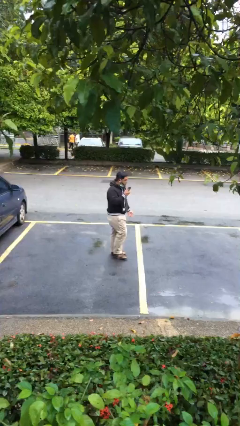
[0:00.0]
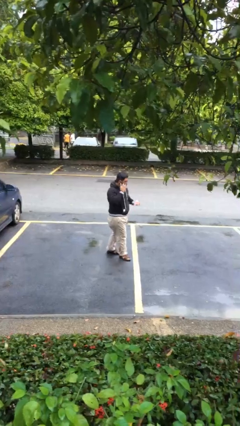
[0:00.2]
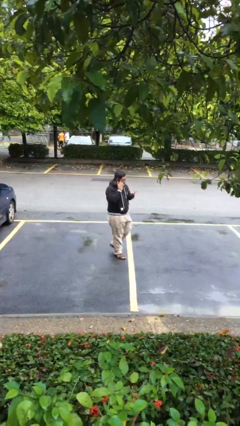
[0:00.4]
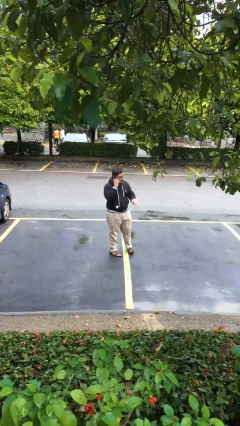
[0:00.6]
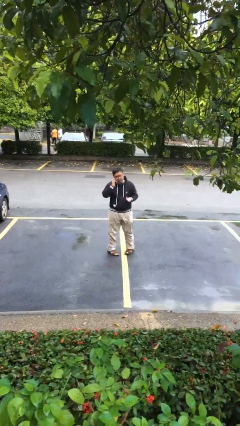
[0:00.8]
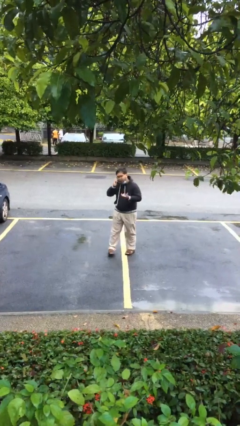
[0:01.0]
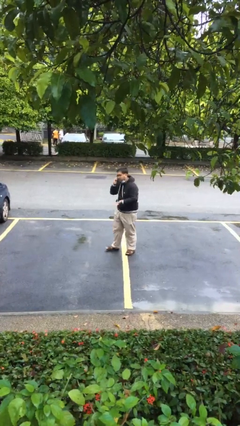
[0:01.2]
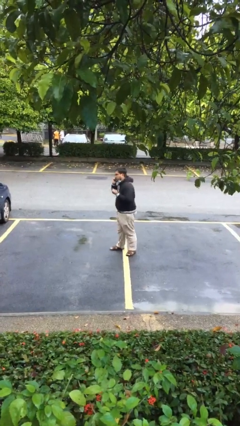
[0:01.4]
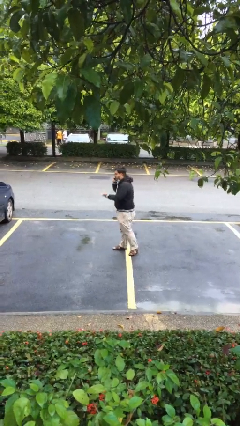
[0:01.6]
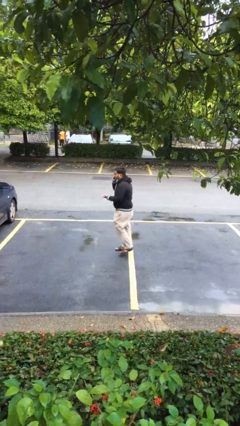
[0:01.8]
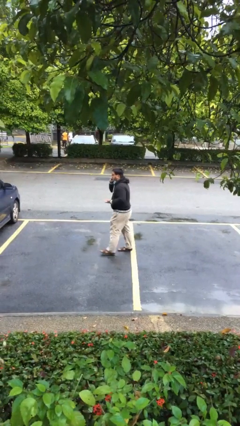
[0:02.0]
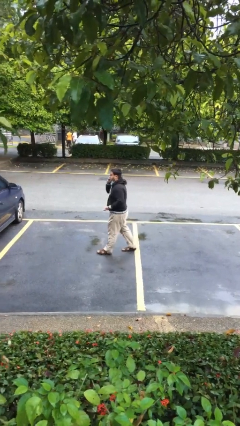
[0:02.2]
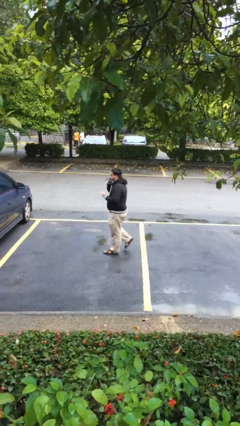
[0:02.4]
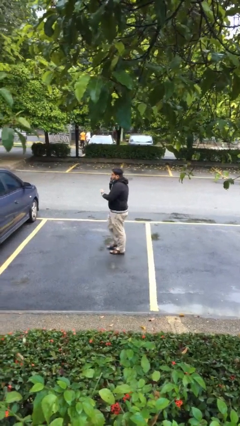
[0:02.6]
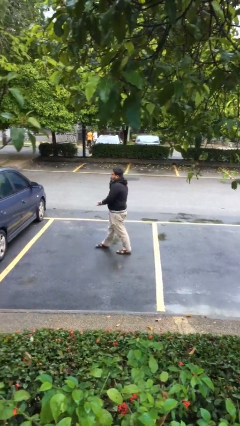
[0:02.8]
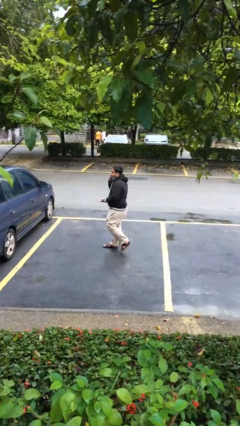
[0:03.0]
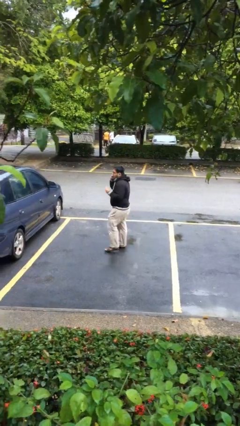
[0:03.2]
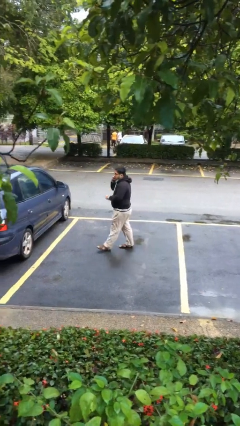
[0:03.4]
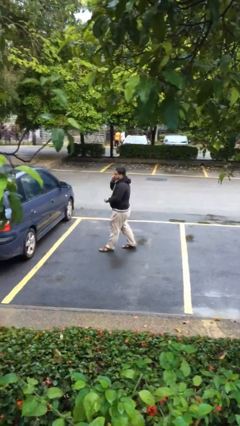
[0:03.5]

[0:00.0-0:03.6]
person talks on phone

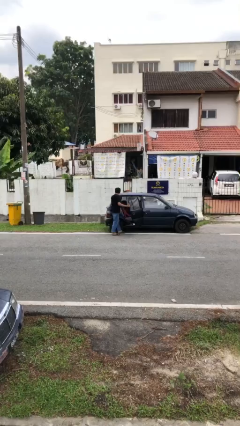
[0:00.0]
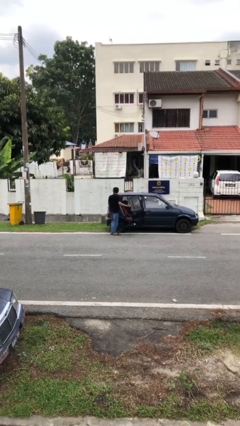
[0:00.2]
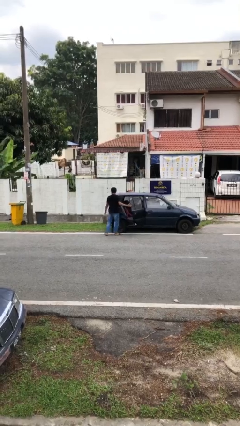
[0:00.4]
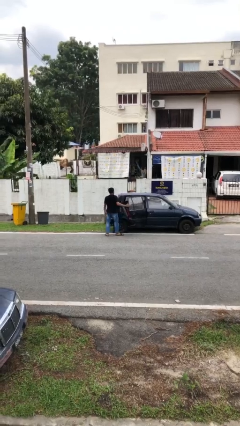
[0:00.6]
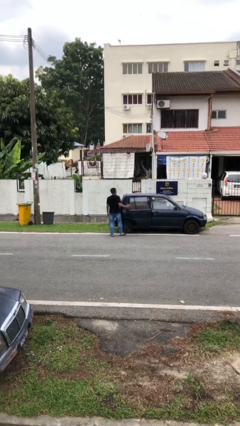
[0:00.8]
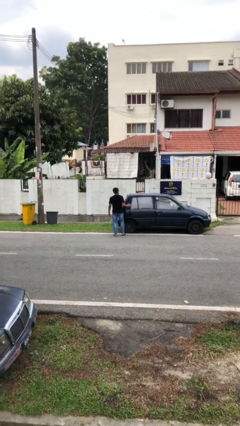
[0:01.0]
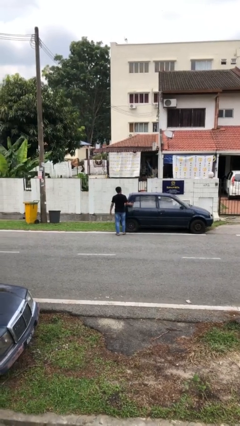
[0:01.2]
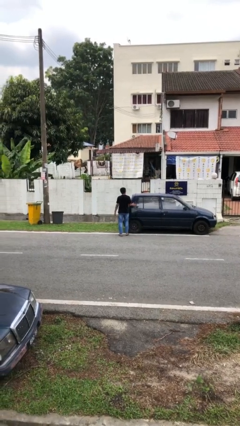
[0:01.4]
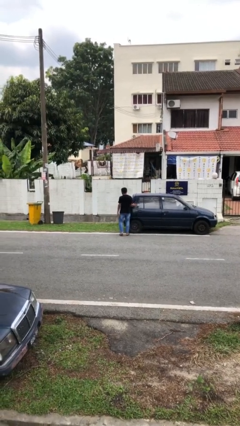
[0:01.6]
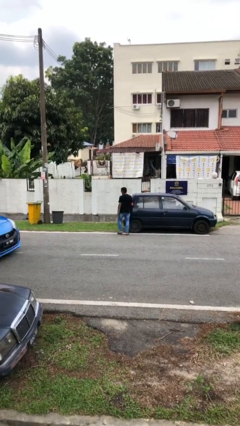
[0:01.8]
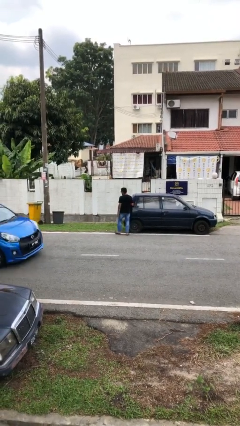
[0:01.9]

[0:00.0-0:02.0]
person closes car door

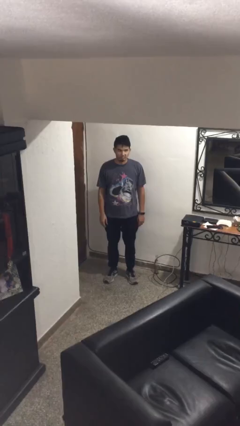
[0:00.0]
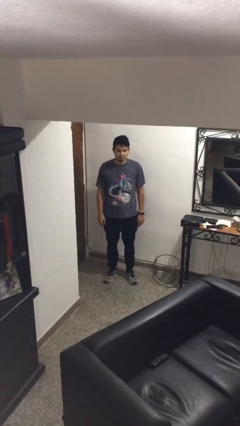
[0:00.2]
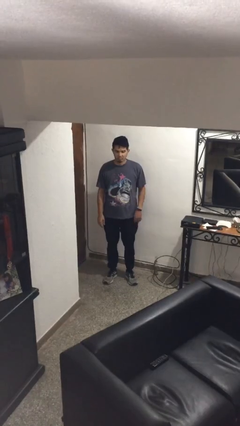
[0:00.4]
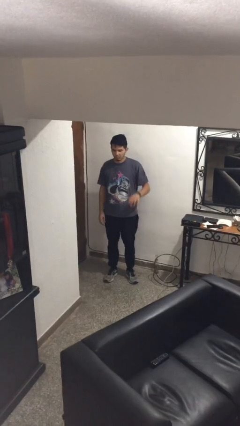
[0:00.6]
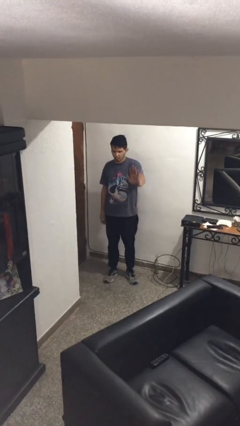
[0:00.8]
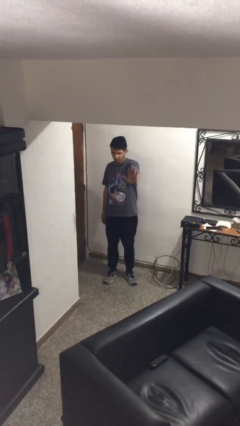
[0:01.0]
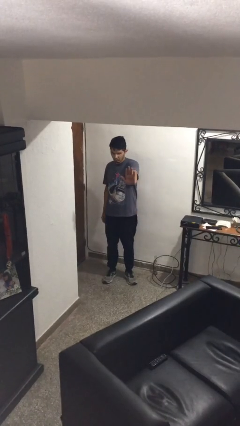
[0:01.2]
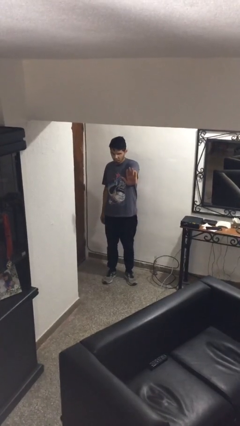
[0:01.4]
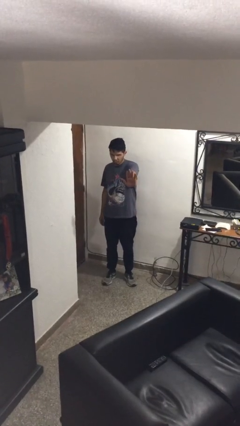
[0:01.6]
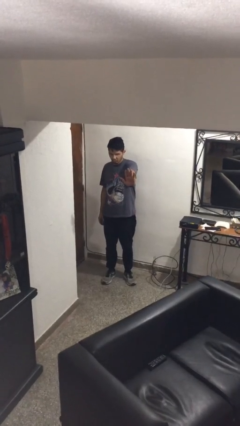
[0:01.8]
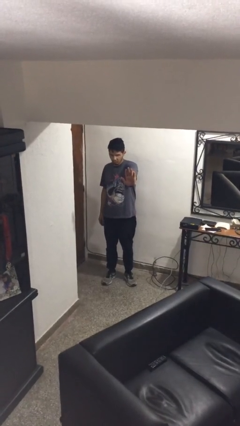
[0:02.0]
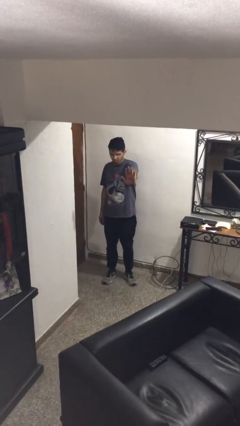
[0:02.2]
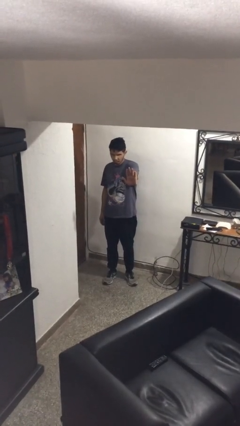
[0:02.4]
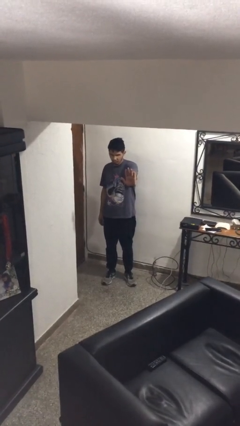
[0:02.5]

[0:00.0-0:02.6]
person gestures stop

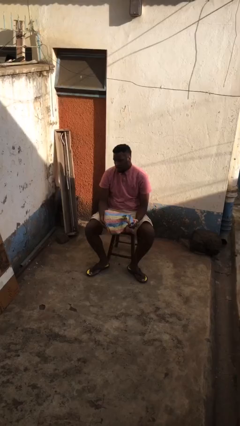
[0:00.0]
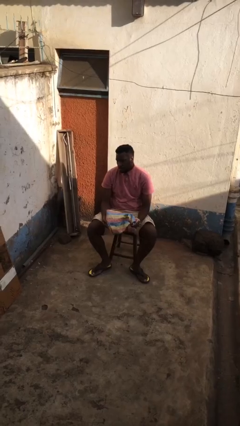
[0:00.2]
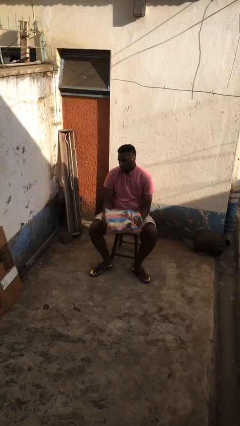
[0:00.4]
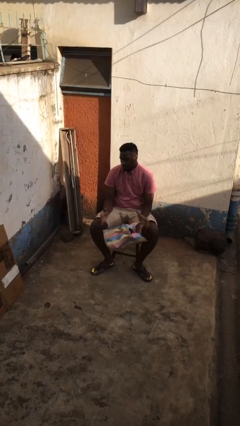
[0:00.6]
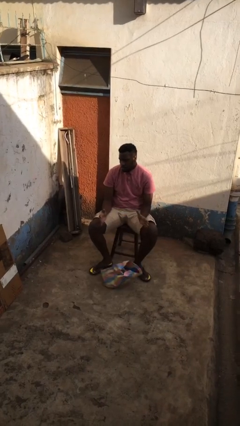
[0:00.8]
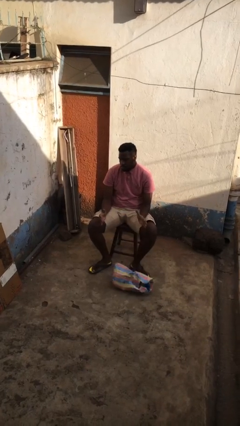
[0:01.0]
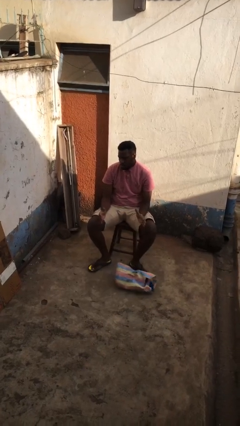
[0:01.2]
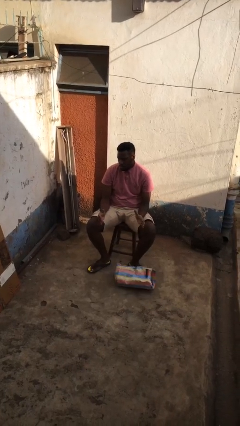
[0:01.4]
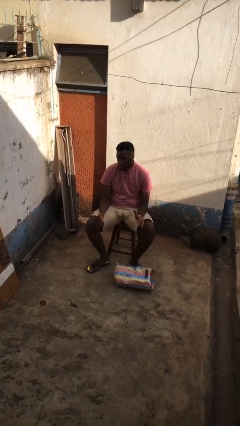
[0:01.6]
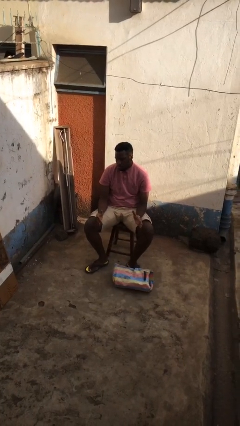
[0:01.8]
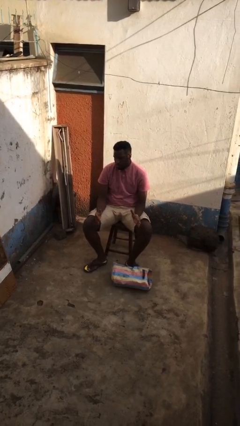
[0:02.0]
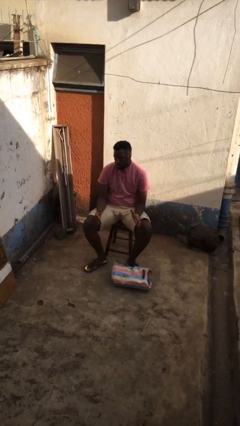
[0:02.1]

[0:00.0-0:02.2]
person drops object

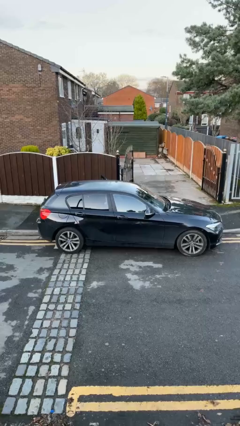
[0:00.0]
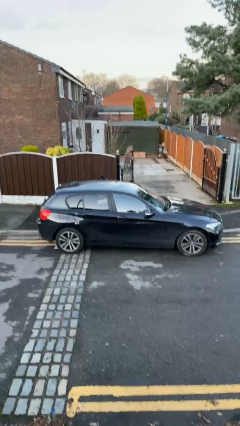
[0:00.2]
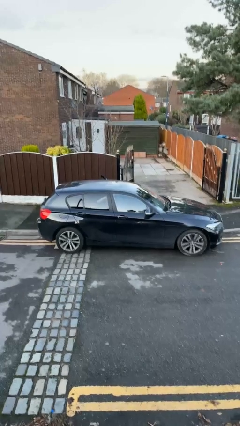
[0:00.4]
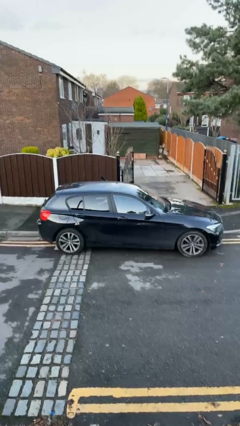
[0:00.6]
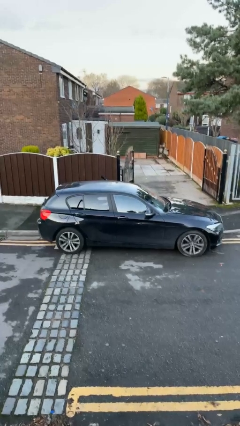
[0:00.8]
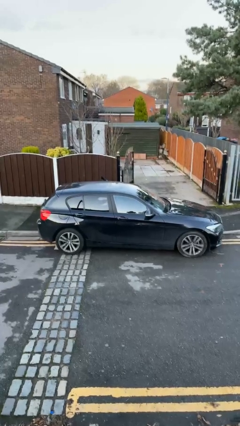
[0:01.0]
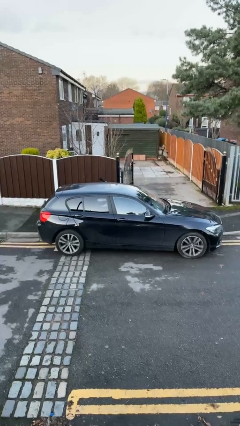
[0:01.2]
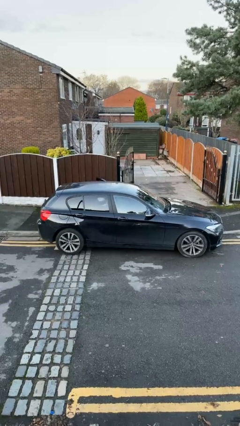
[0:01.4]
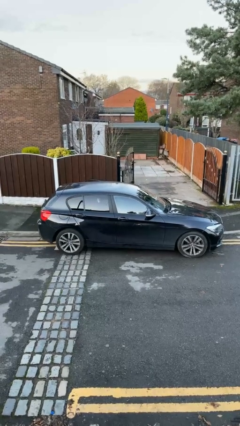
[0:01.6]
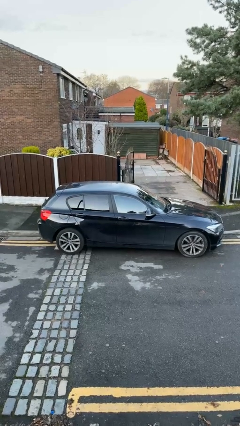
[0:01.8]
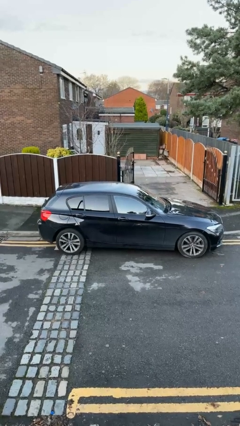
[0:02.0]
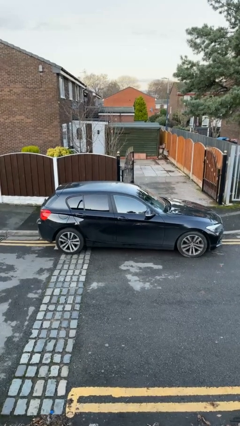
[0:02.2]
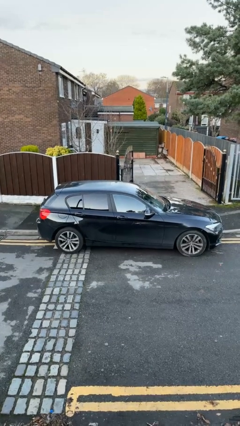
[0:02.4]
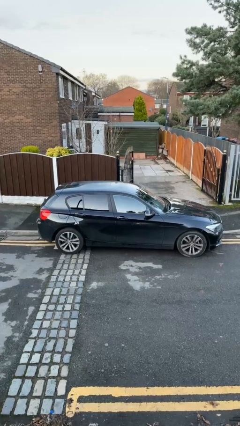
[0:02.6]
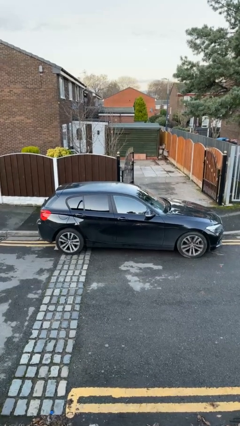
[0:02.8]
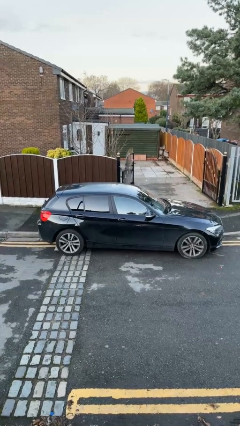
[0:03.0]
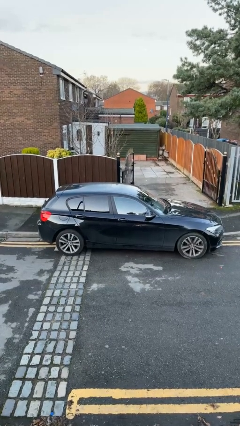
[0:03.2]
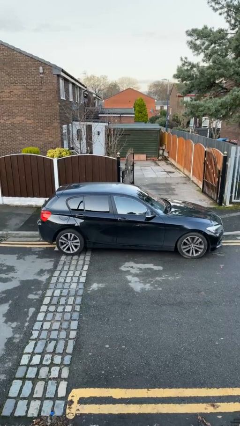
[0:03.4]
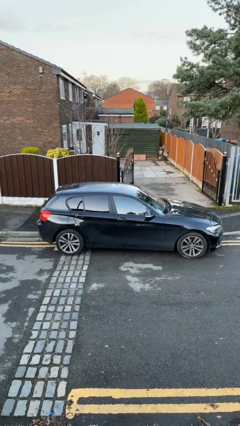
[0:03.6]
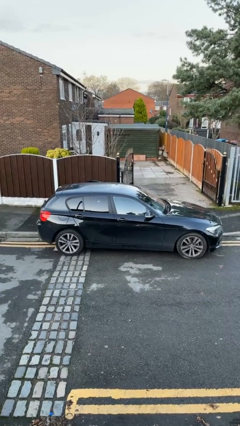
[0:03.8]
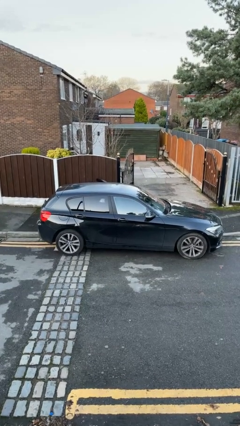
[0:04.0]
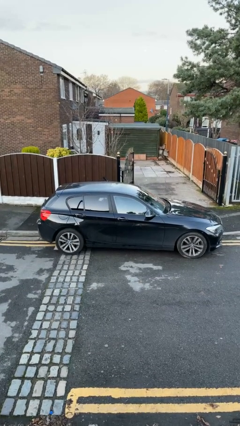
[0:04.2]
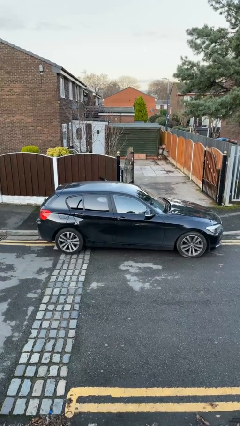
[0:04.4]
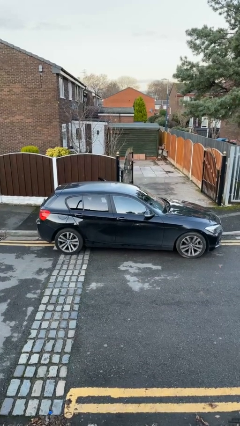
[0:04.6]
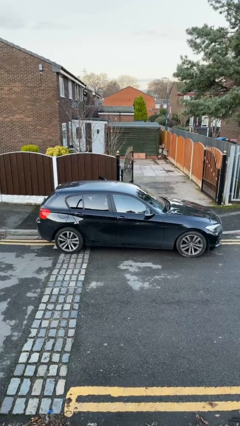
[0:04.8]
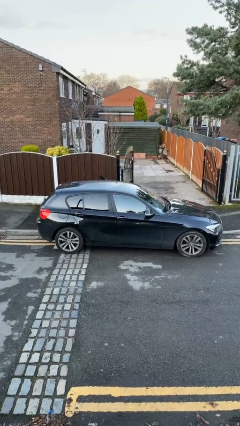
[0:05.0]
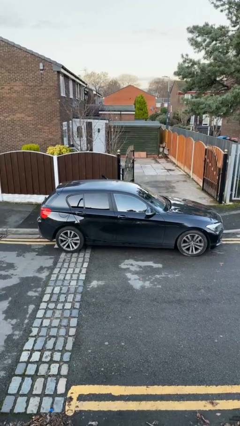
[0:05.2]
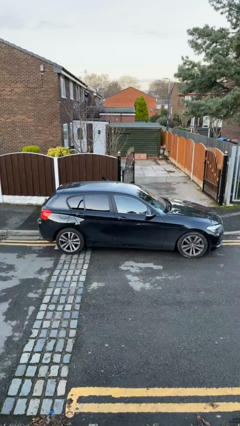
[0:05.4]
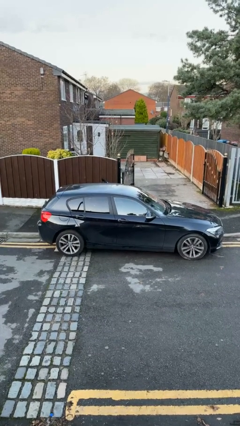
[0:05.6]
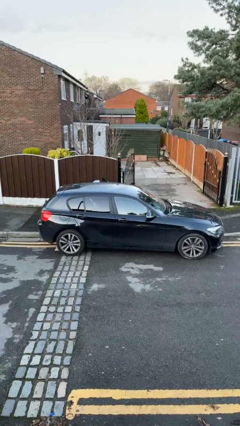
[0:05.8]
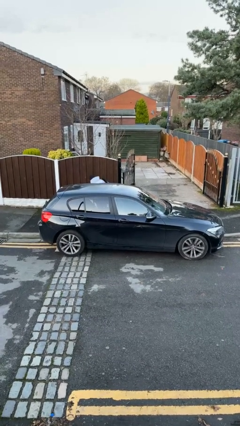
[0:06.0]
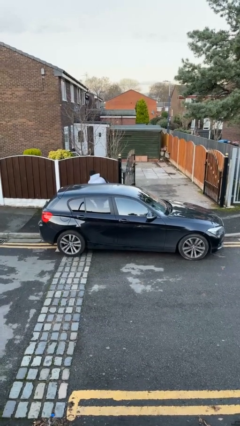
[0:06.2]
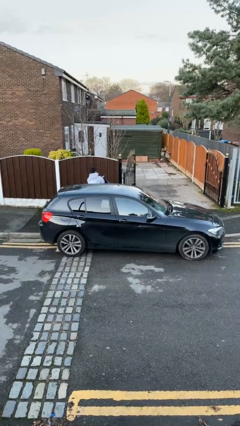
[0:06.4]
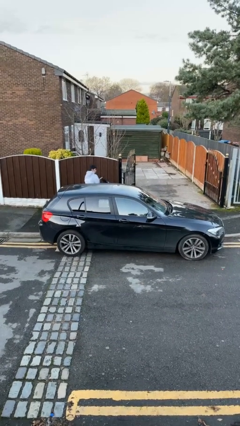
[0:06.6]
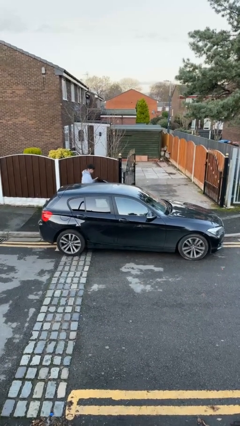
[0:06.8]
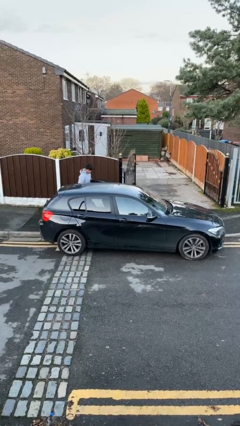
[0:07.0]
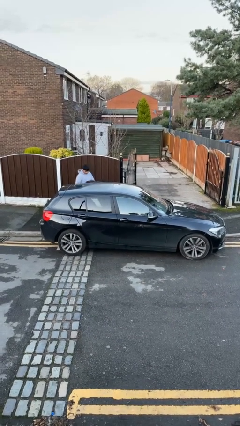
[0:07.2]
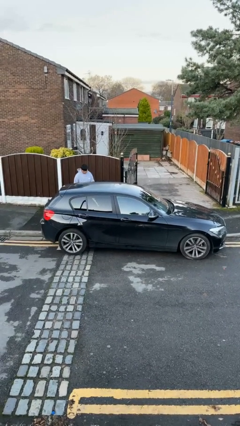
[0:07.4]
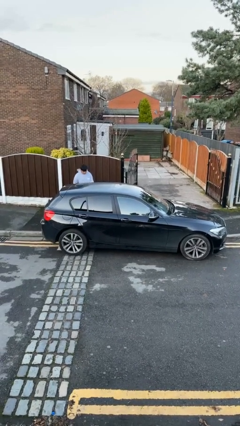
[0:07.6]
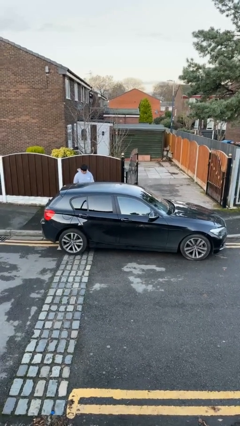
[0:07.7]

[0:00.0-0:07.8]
car drops off person
